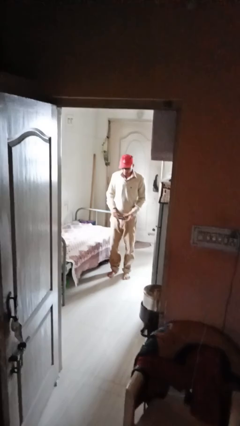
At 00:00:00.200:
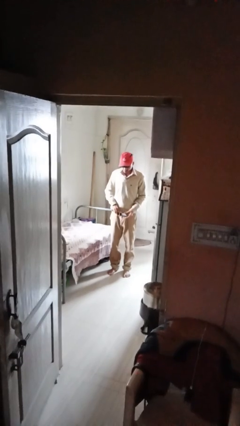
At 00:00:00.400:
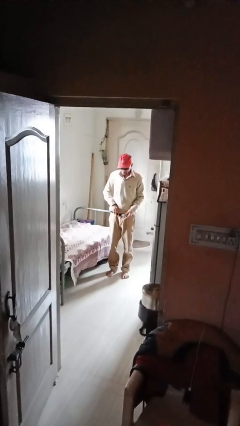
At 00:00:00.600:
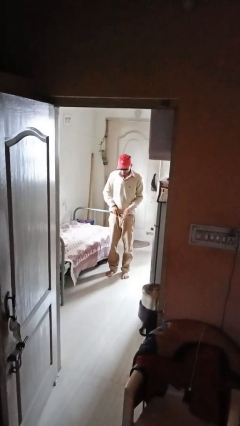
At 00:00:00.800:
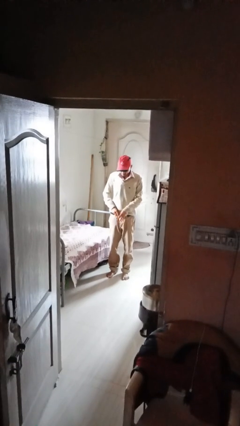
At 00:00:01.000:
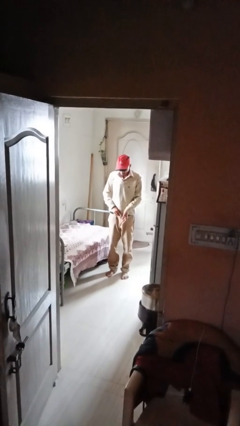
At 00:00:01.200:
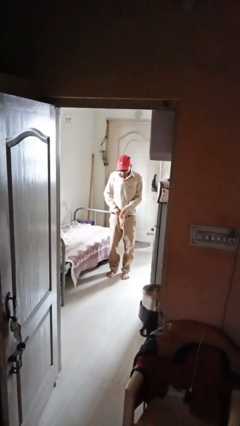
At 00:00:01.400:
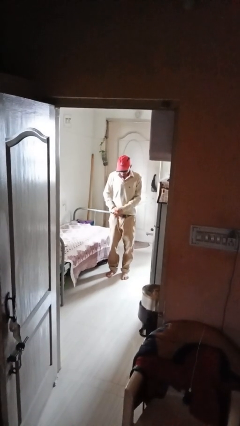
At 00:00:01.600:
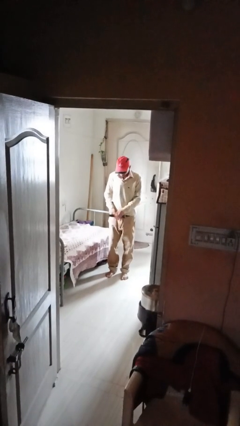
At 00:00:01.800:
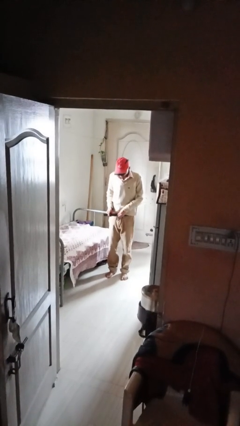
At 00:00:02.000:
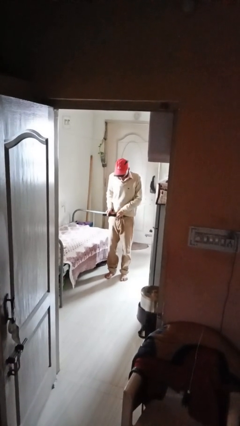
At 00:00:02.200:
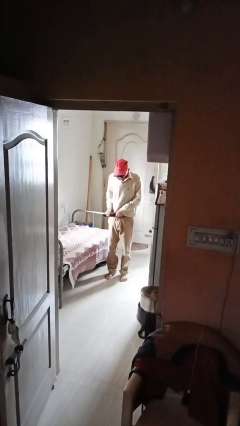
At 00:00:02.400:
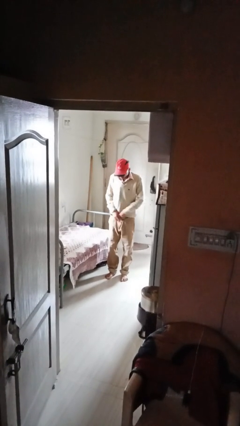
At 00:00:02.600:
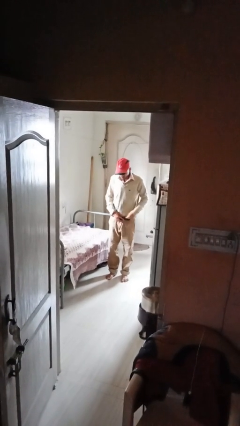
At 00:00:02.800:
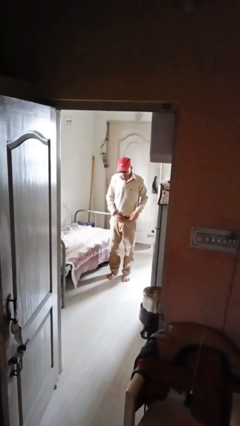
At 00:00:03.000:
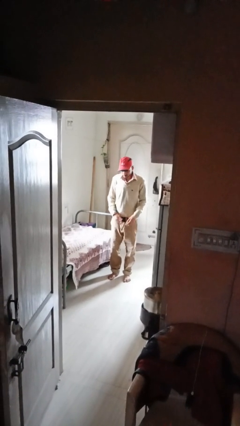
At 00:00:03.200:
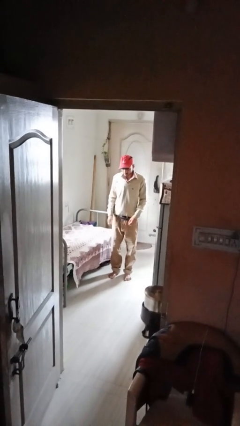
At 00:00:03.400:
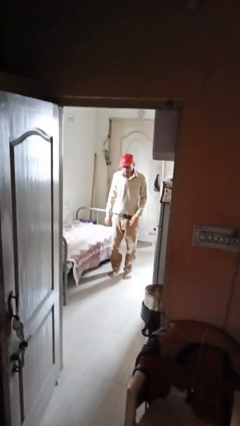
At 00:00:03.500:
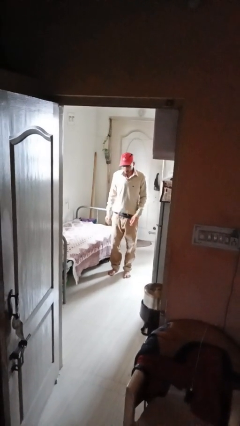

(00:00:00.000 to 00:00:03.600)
person puts on belt

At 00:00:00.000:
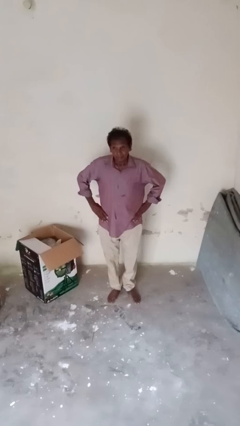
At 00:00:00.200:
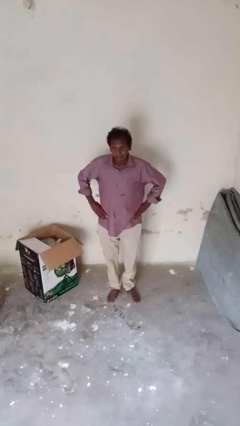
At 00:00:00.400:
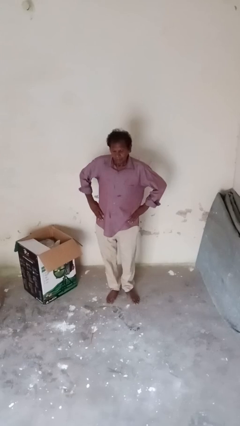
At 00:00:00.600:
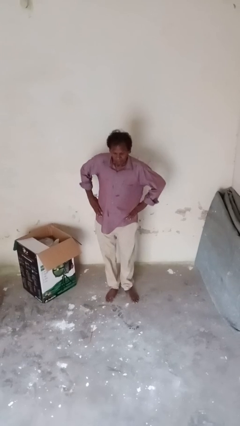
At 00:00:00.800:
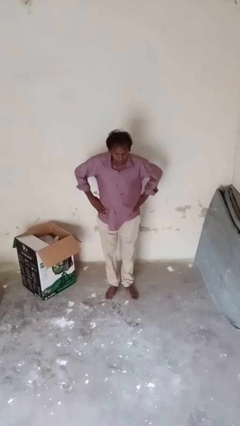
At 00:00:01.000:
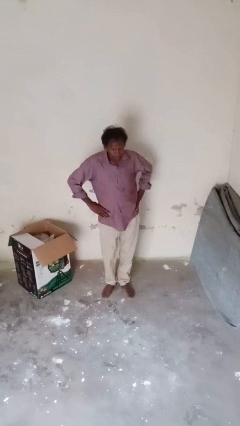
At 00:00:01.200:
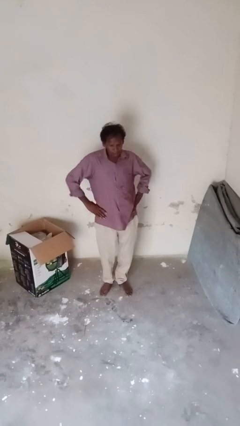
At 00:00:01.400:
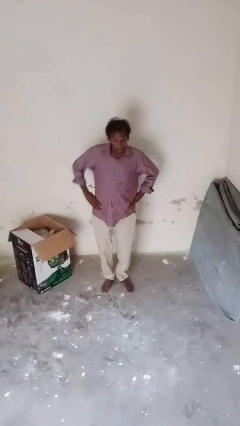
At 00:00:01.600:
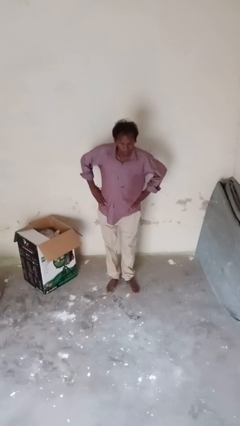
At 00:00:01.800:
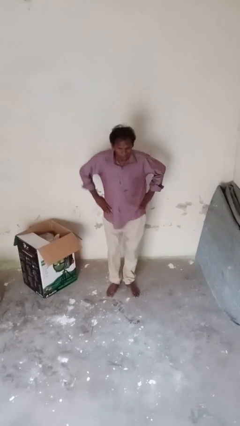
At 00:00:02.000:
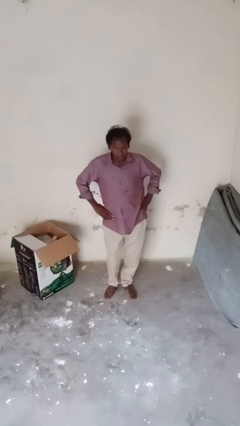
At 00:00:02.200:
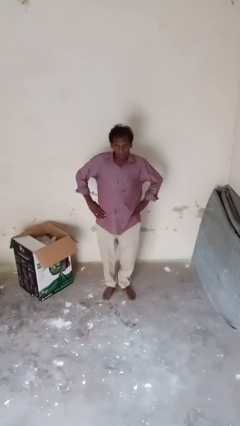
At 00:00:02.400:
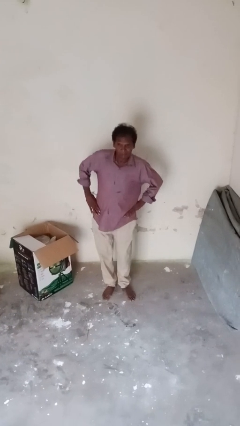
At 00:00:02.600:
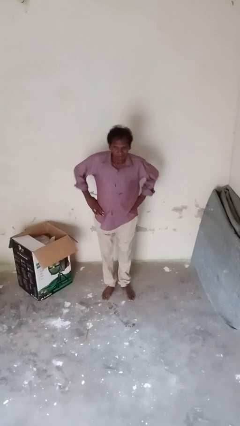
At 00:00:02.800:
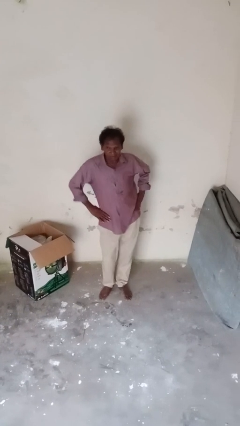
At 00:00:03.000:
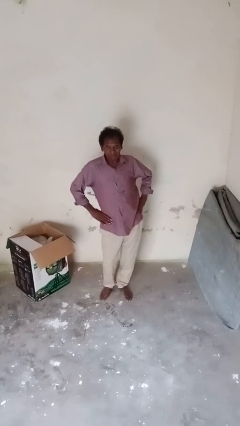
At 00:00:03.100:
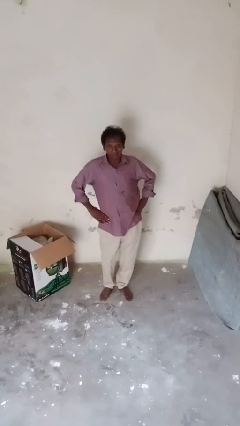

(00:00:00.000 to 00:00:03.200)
person wiggles hips

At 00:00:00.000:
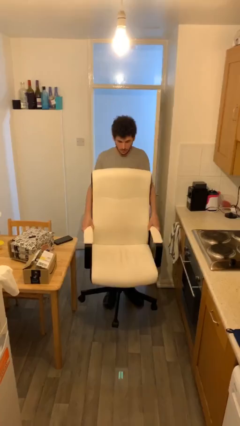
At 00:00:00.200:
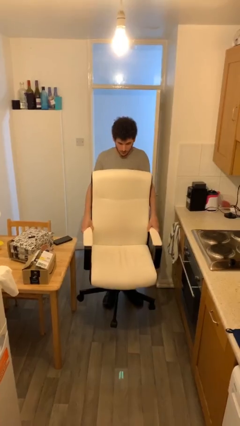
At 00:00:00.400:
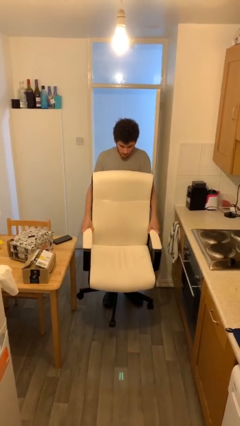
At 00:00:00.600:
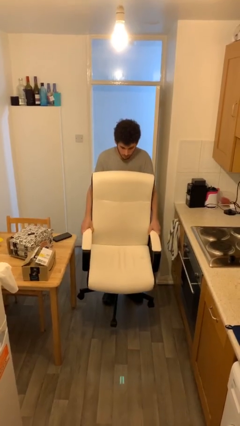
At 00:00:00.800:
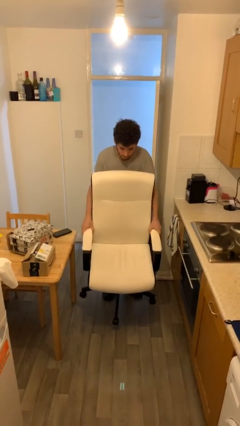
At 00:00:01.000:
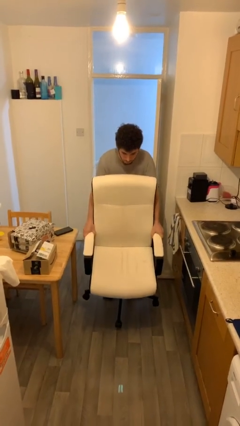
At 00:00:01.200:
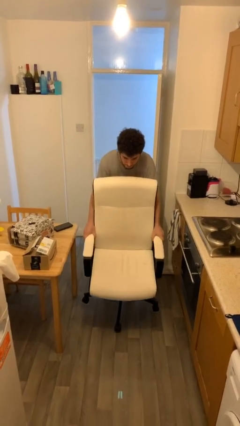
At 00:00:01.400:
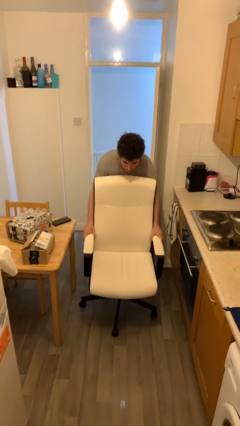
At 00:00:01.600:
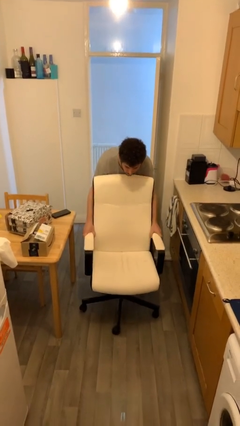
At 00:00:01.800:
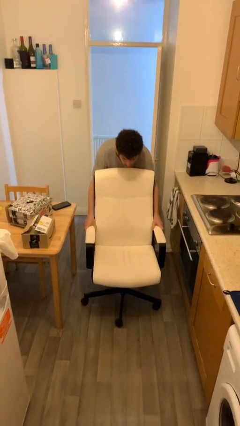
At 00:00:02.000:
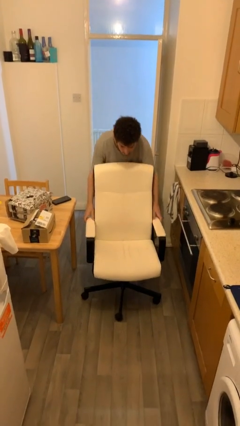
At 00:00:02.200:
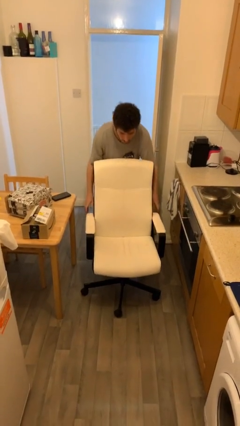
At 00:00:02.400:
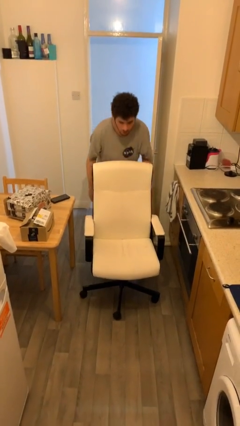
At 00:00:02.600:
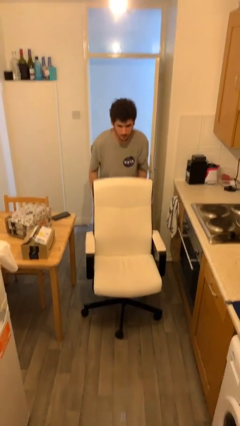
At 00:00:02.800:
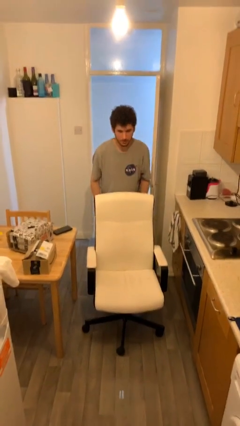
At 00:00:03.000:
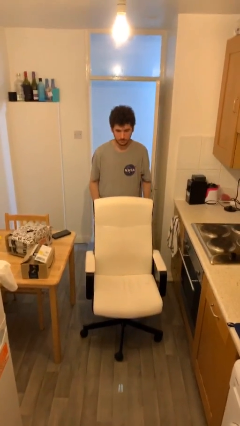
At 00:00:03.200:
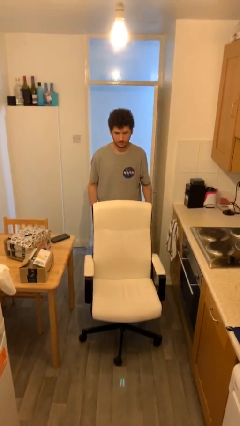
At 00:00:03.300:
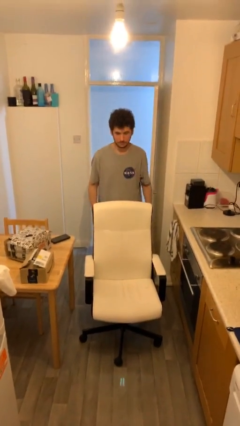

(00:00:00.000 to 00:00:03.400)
person puts down object on floor

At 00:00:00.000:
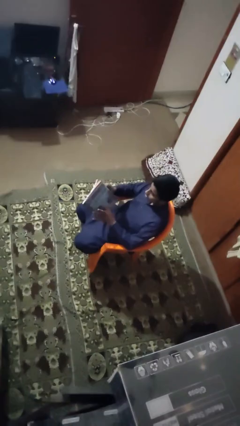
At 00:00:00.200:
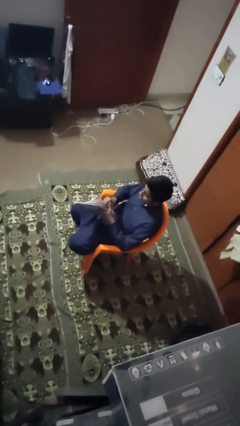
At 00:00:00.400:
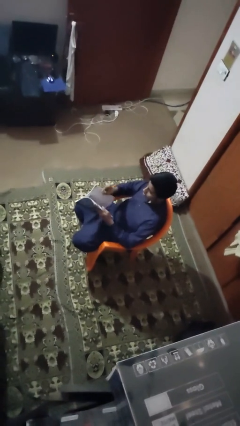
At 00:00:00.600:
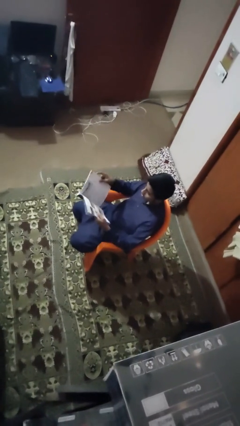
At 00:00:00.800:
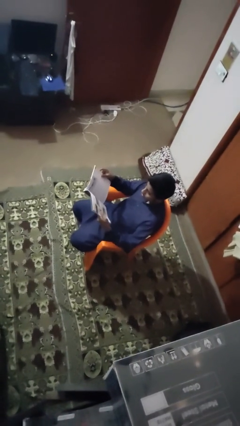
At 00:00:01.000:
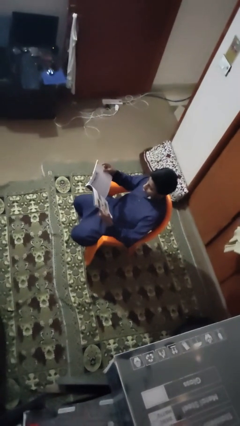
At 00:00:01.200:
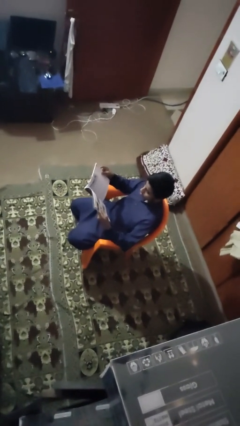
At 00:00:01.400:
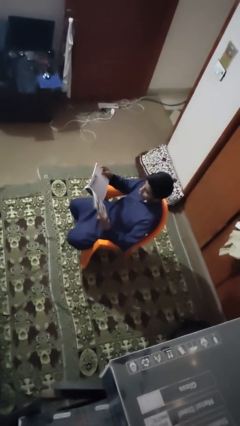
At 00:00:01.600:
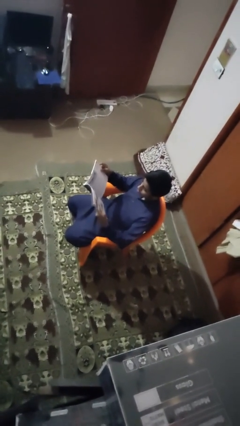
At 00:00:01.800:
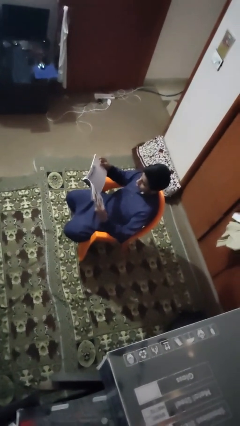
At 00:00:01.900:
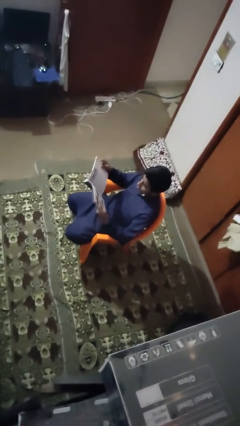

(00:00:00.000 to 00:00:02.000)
person reads book

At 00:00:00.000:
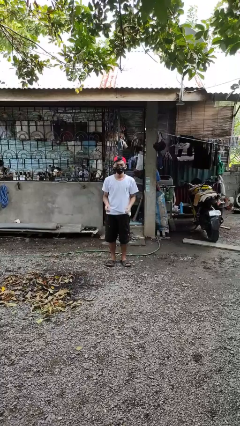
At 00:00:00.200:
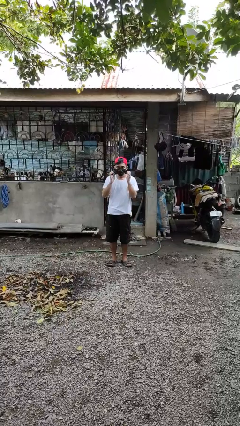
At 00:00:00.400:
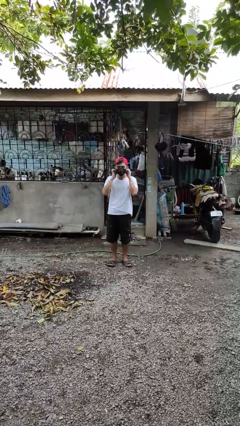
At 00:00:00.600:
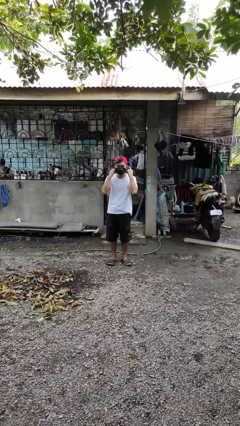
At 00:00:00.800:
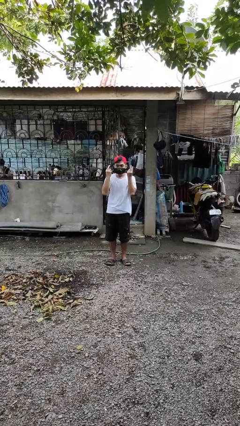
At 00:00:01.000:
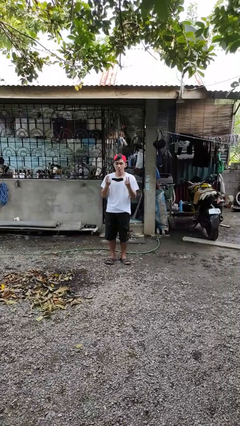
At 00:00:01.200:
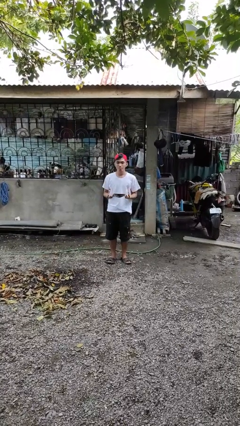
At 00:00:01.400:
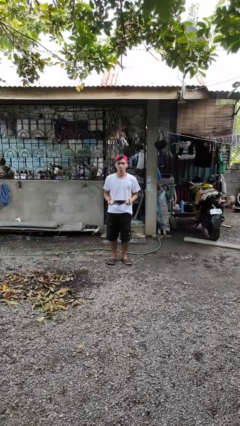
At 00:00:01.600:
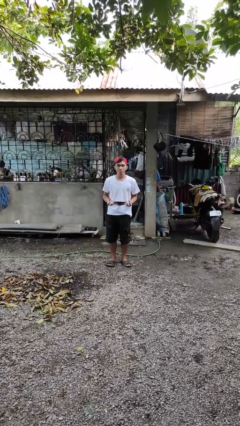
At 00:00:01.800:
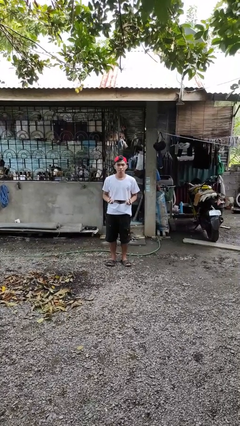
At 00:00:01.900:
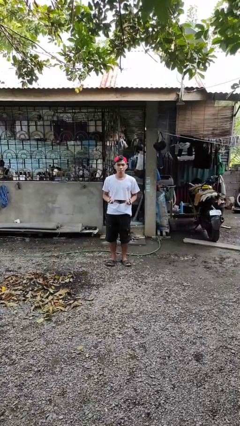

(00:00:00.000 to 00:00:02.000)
person takes off facemask

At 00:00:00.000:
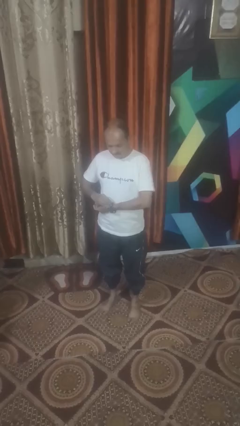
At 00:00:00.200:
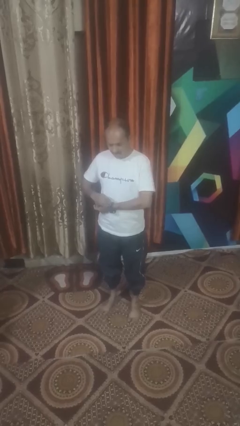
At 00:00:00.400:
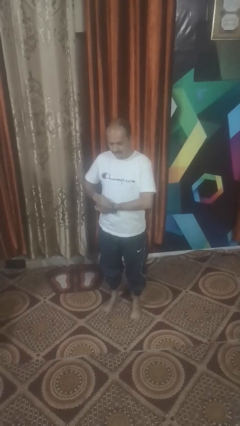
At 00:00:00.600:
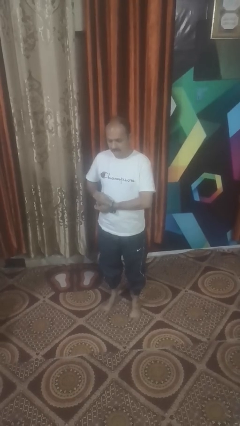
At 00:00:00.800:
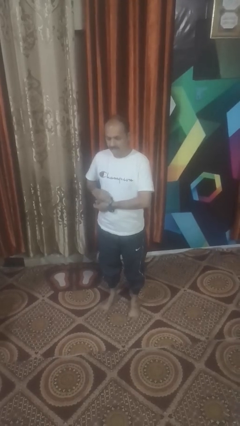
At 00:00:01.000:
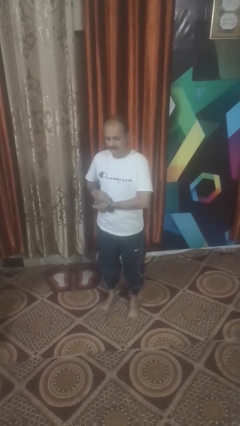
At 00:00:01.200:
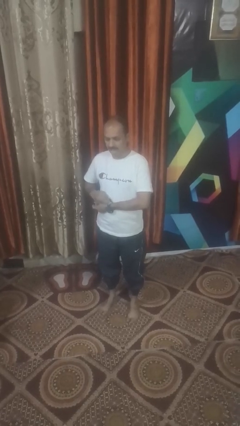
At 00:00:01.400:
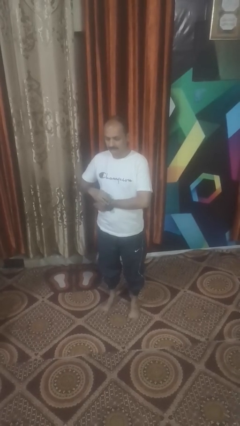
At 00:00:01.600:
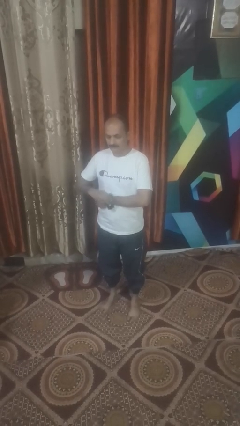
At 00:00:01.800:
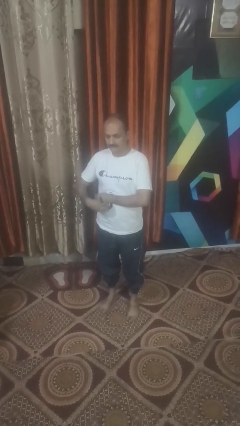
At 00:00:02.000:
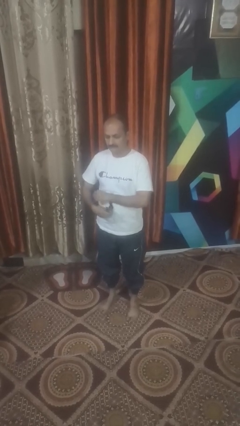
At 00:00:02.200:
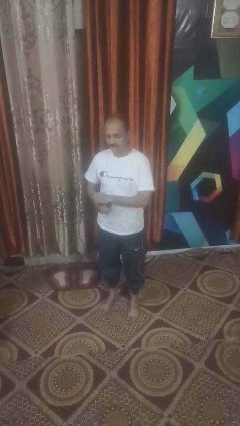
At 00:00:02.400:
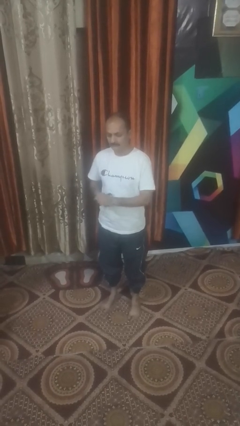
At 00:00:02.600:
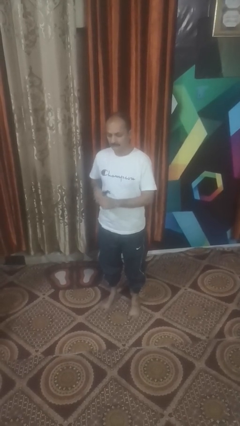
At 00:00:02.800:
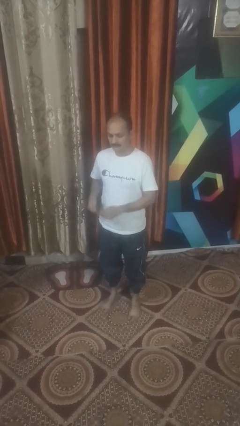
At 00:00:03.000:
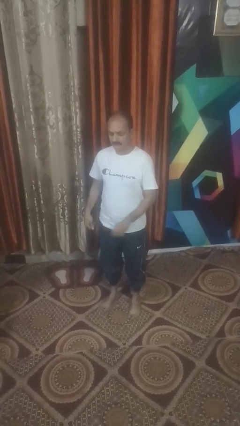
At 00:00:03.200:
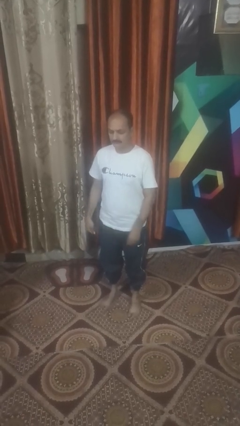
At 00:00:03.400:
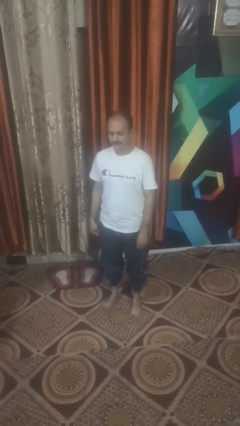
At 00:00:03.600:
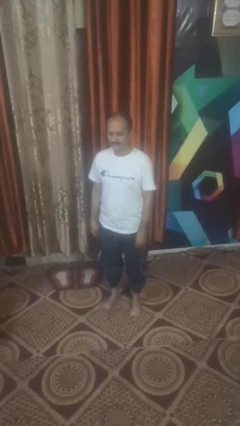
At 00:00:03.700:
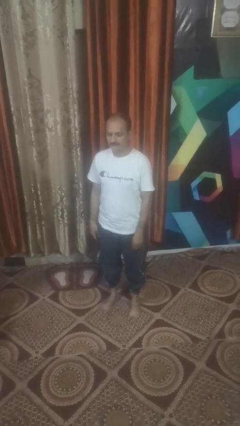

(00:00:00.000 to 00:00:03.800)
person takes off wristwatch
